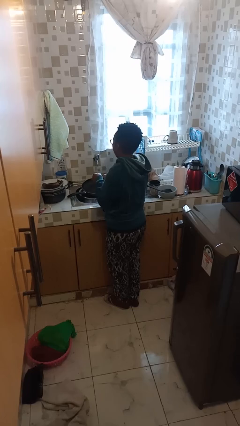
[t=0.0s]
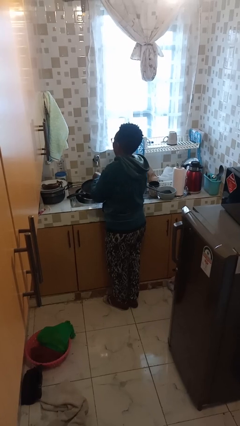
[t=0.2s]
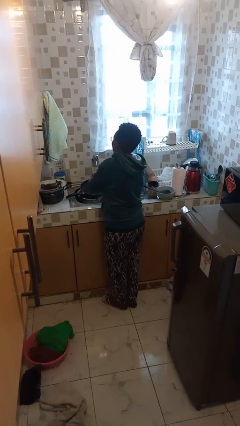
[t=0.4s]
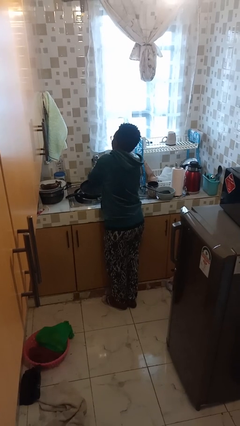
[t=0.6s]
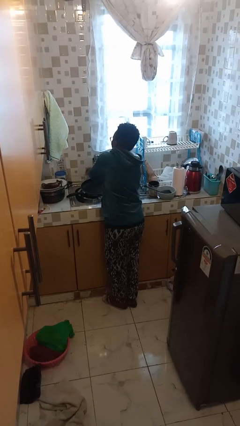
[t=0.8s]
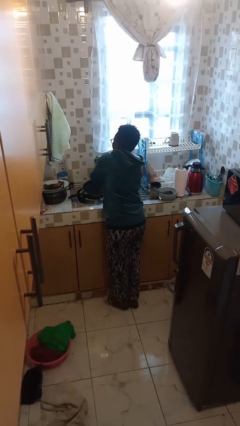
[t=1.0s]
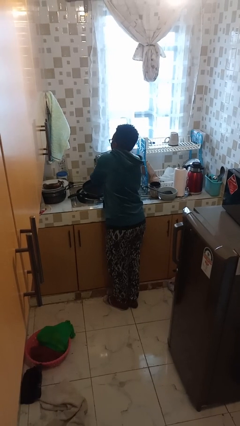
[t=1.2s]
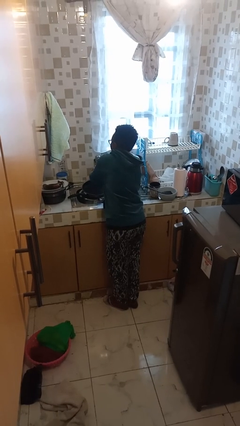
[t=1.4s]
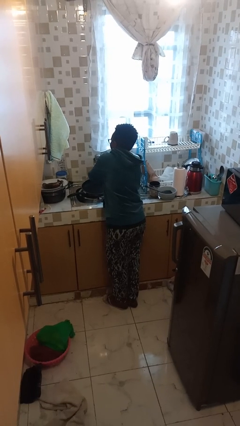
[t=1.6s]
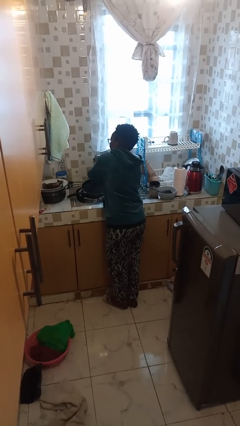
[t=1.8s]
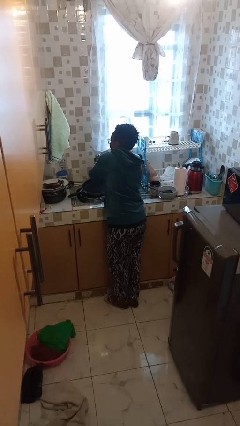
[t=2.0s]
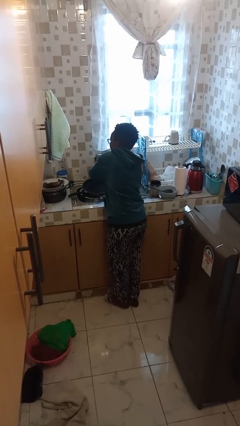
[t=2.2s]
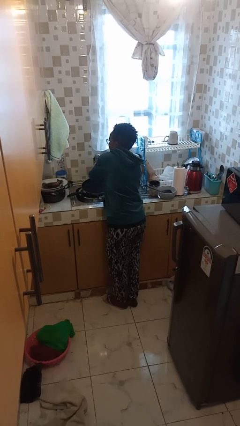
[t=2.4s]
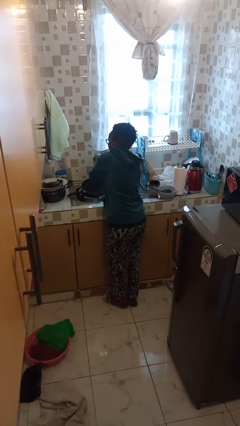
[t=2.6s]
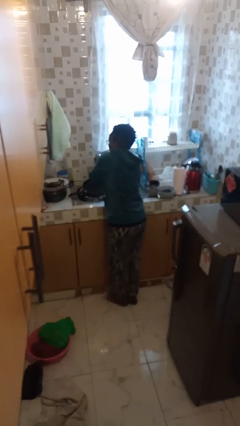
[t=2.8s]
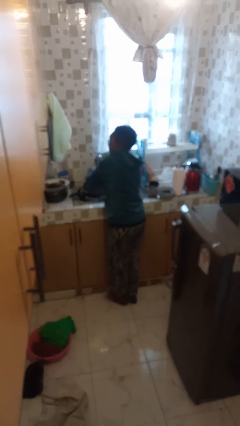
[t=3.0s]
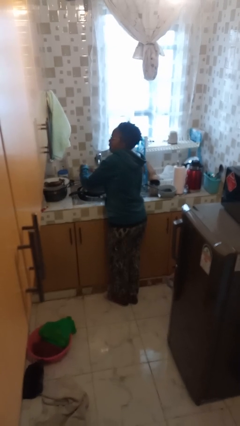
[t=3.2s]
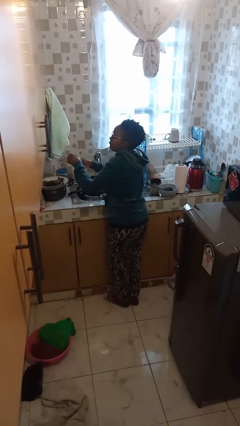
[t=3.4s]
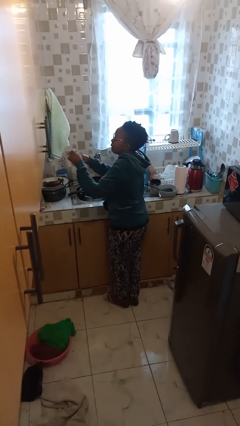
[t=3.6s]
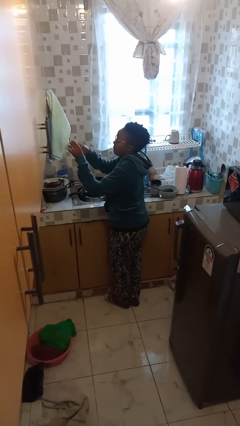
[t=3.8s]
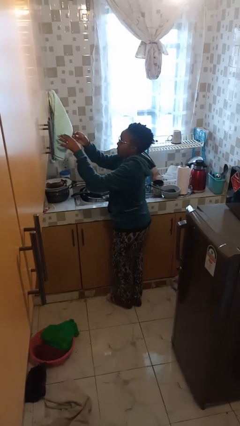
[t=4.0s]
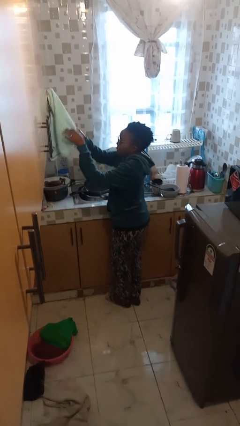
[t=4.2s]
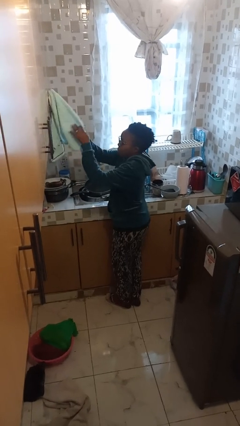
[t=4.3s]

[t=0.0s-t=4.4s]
person washes hands

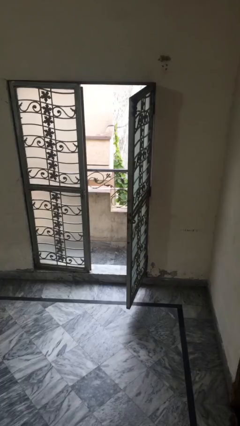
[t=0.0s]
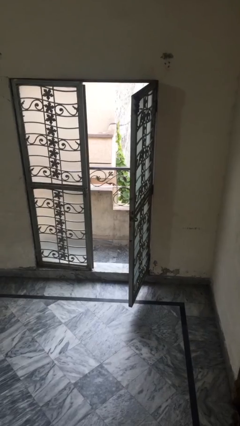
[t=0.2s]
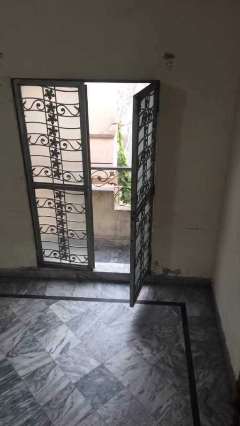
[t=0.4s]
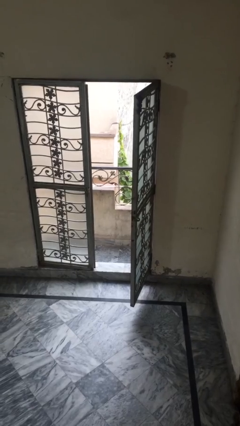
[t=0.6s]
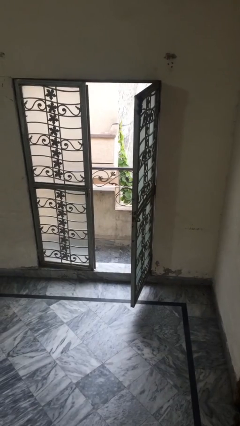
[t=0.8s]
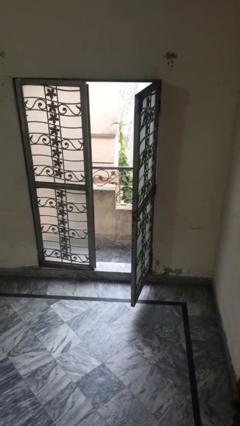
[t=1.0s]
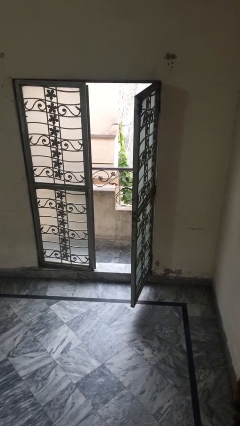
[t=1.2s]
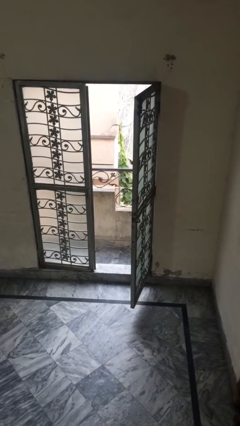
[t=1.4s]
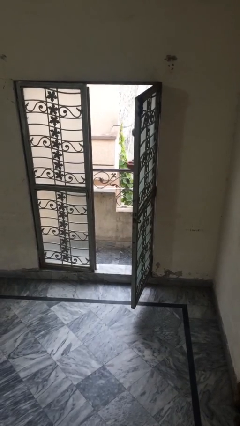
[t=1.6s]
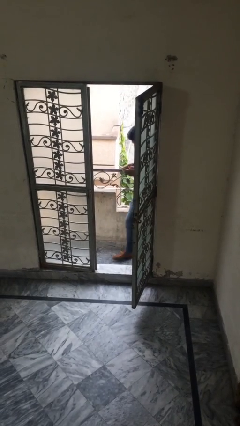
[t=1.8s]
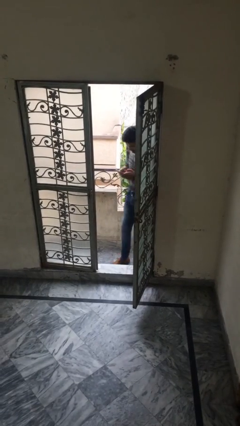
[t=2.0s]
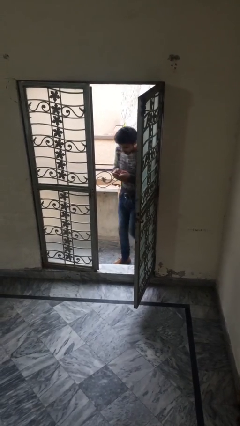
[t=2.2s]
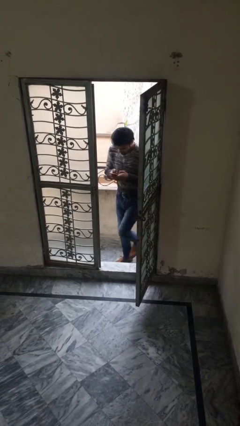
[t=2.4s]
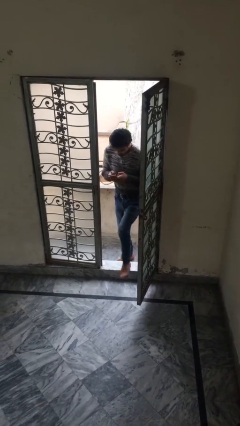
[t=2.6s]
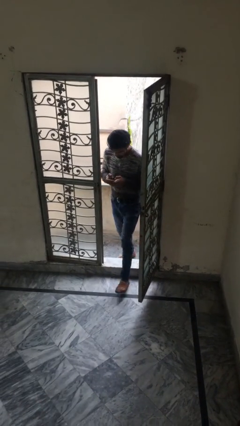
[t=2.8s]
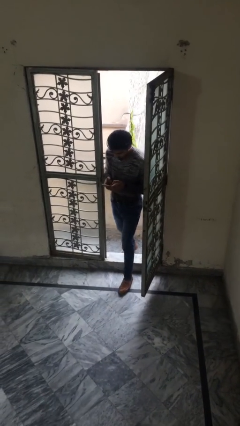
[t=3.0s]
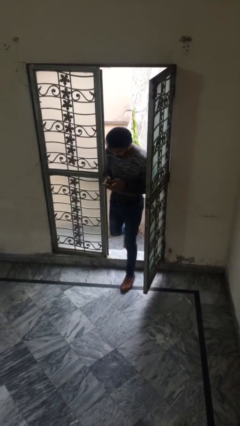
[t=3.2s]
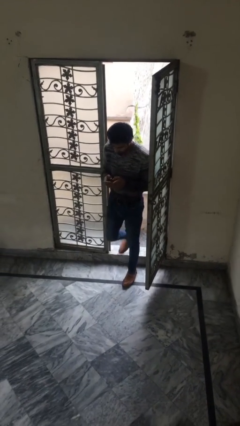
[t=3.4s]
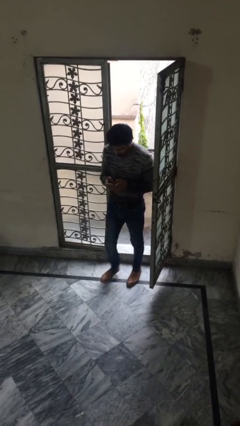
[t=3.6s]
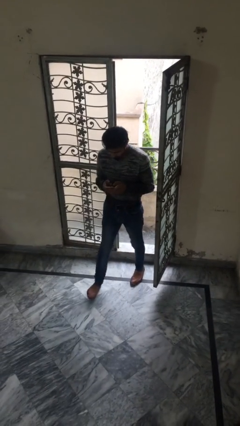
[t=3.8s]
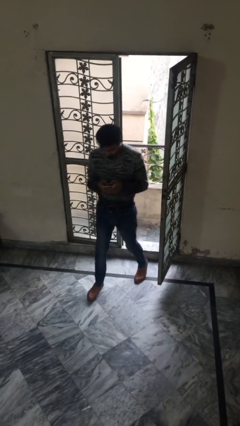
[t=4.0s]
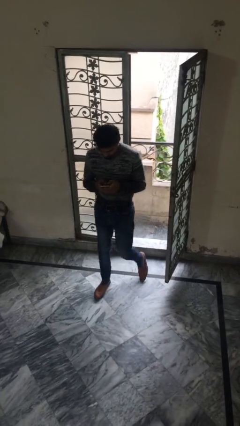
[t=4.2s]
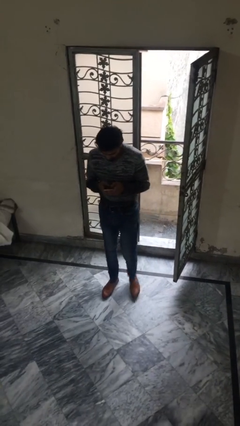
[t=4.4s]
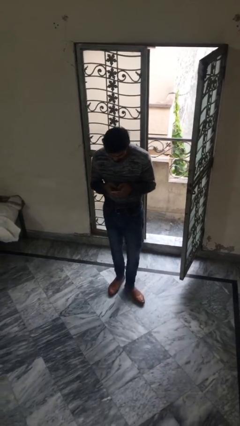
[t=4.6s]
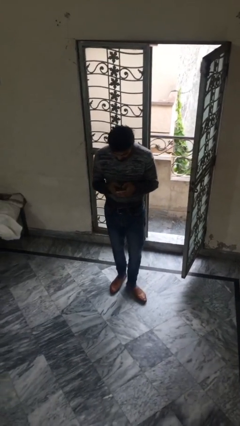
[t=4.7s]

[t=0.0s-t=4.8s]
person enters scene through structure

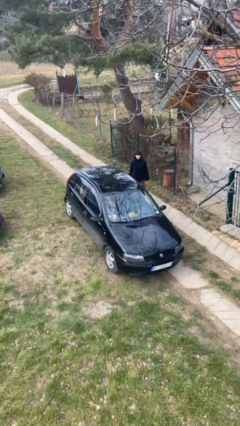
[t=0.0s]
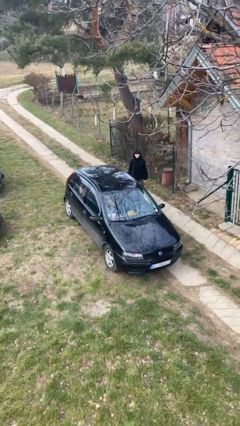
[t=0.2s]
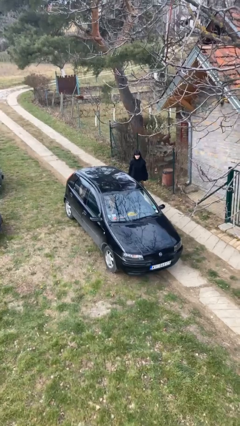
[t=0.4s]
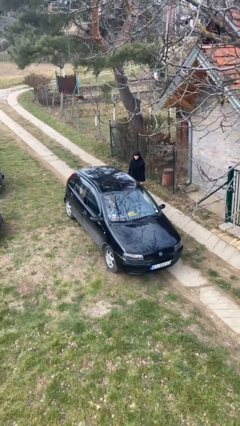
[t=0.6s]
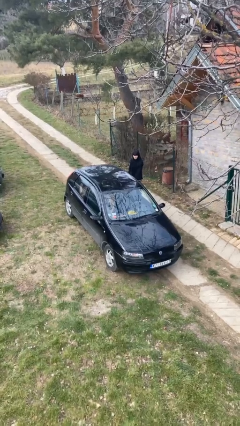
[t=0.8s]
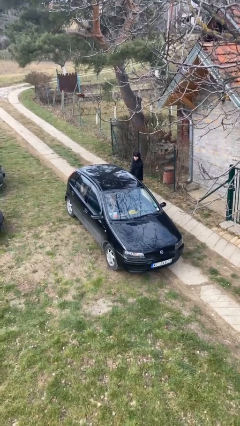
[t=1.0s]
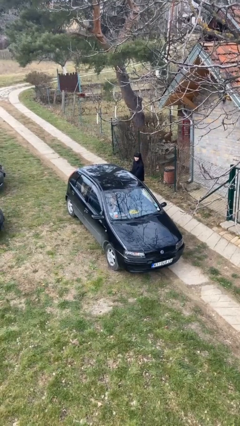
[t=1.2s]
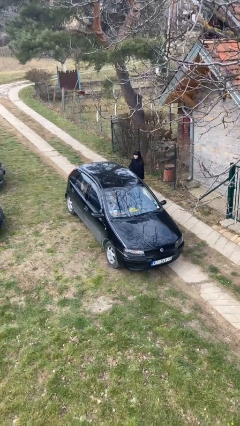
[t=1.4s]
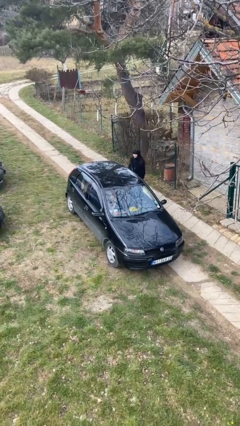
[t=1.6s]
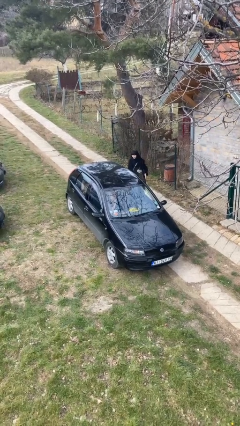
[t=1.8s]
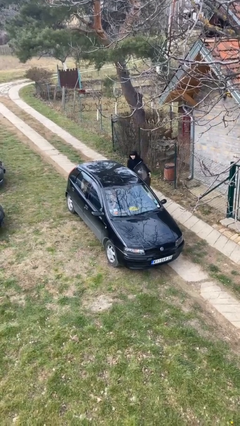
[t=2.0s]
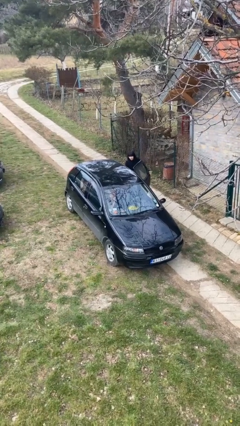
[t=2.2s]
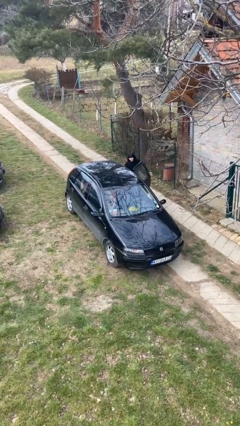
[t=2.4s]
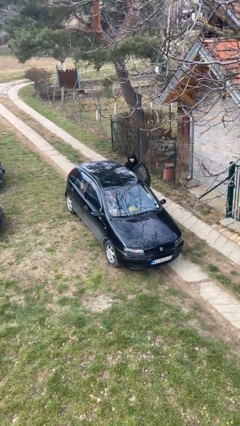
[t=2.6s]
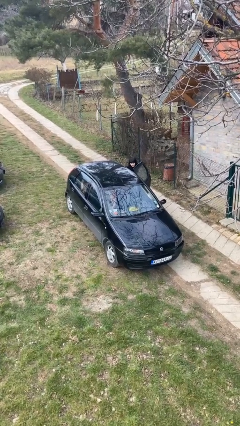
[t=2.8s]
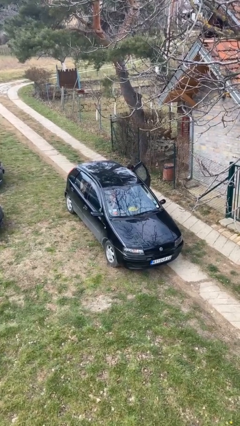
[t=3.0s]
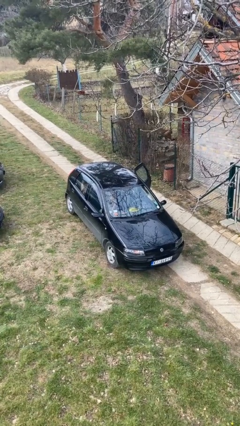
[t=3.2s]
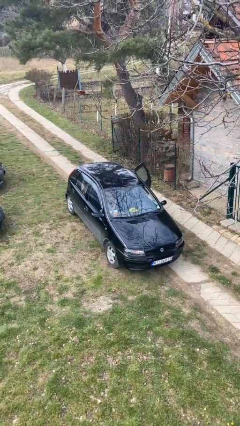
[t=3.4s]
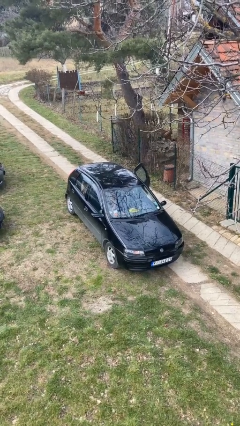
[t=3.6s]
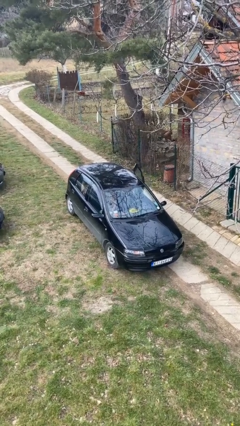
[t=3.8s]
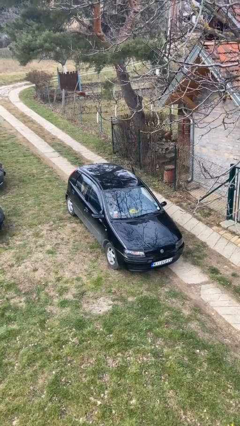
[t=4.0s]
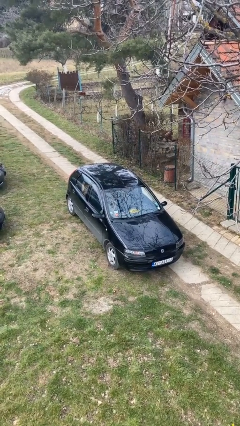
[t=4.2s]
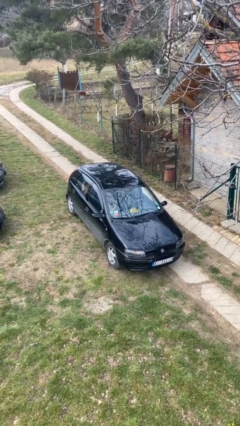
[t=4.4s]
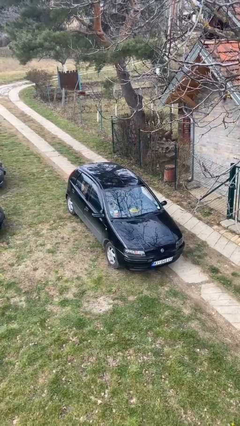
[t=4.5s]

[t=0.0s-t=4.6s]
car picks up person

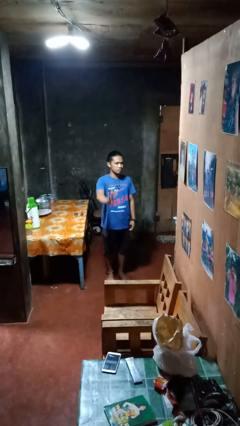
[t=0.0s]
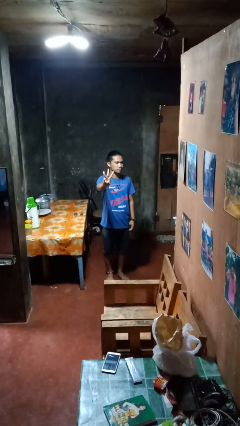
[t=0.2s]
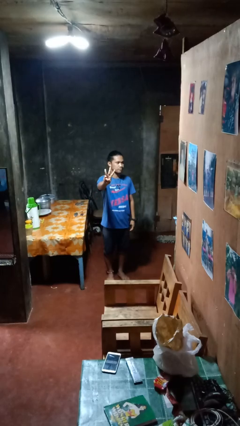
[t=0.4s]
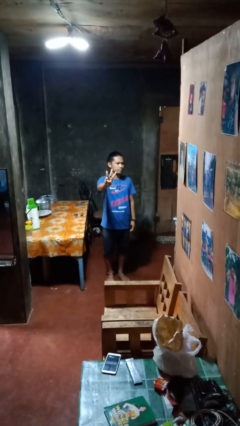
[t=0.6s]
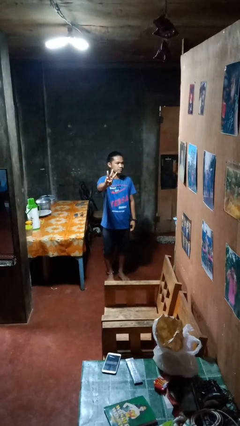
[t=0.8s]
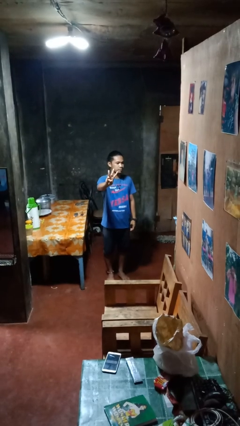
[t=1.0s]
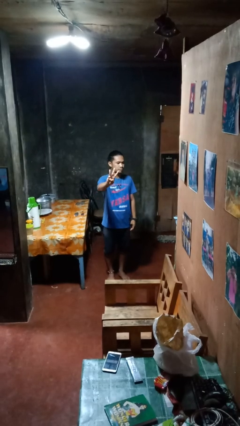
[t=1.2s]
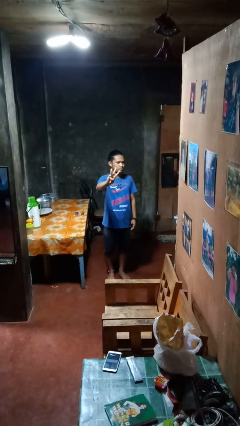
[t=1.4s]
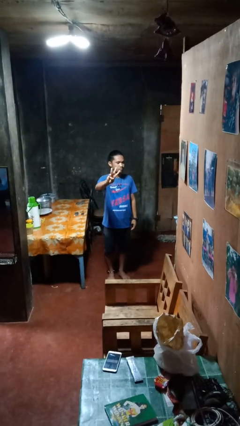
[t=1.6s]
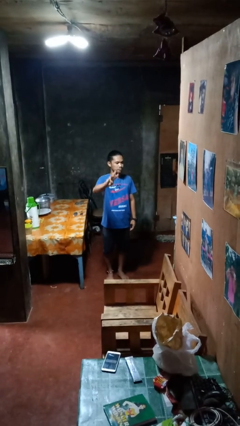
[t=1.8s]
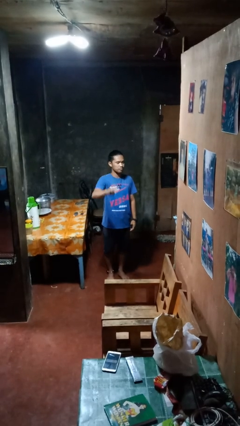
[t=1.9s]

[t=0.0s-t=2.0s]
person gestures number three

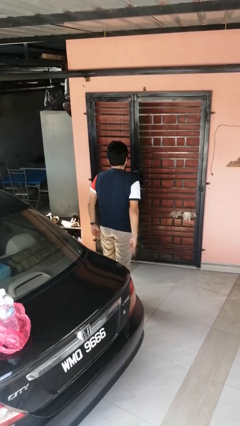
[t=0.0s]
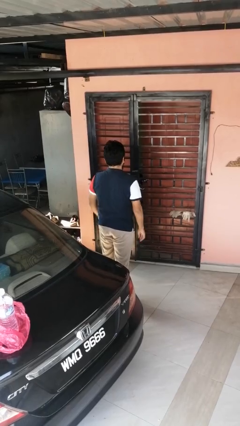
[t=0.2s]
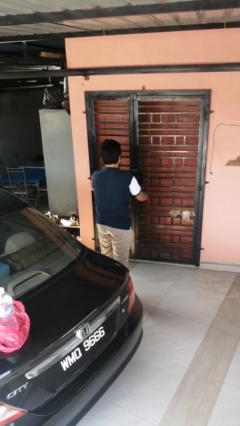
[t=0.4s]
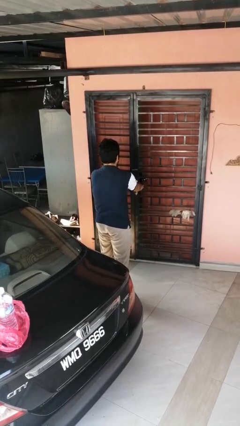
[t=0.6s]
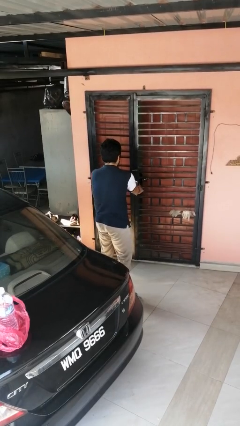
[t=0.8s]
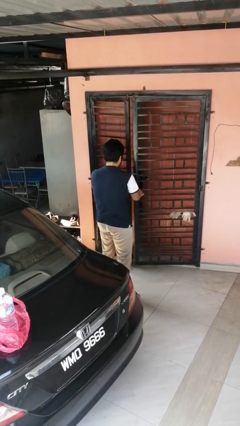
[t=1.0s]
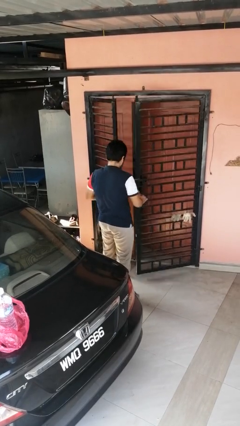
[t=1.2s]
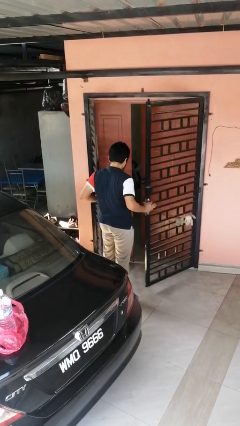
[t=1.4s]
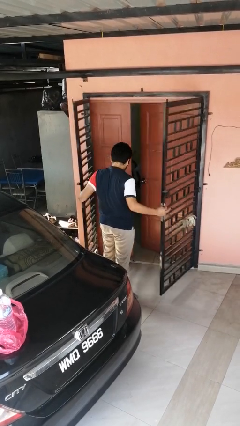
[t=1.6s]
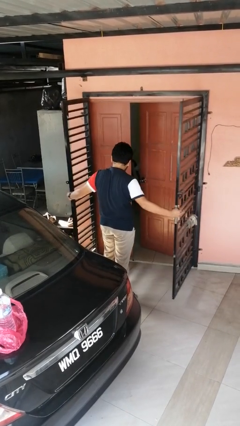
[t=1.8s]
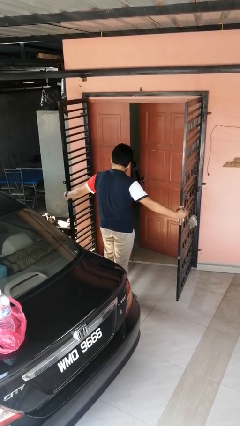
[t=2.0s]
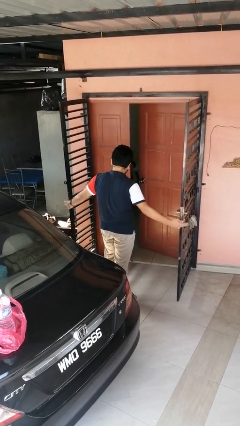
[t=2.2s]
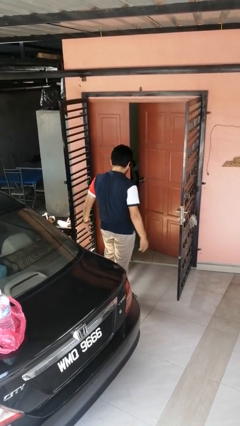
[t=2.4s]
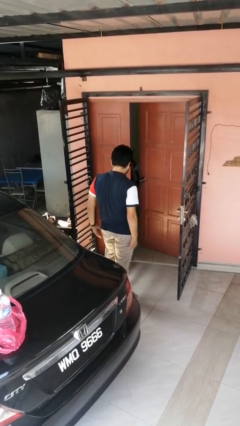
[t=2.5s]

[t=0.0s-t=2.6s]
person opens gate
